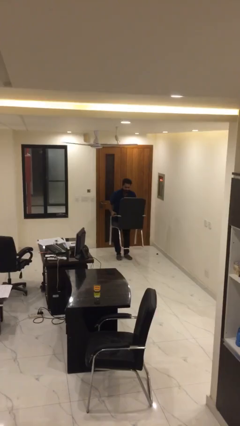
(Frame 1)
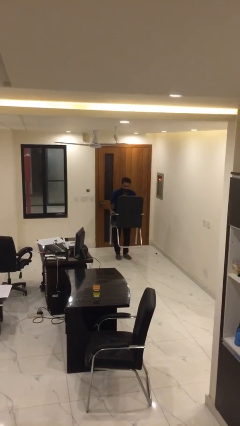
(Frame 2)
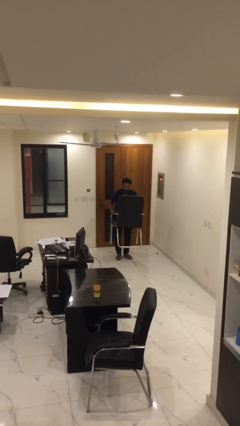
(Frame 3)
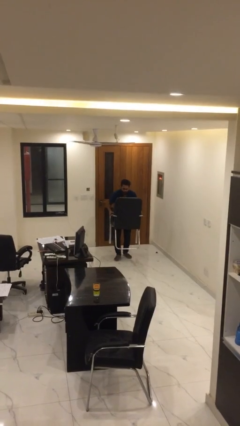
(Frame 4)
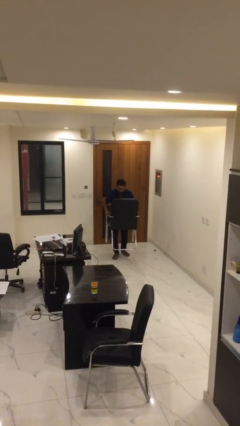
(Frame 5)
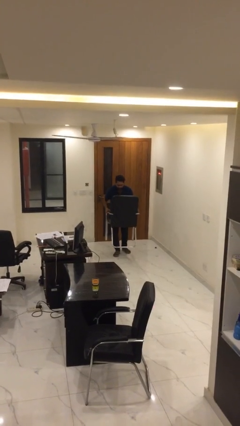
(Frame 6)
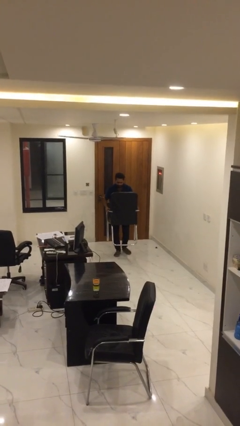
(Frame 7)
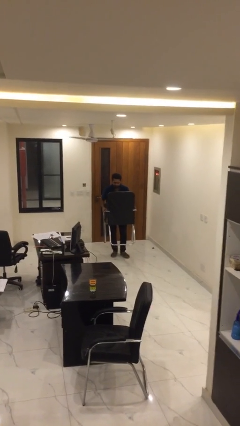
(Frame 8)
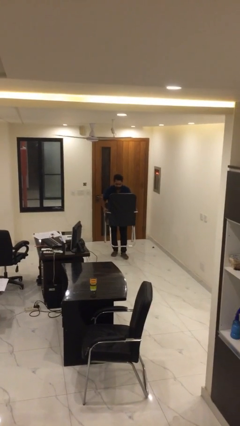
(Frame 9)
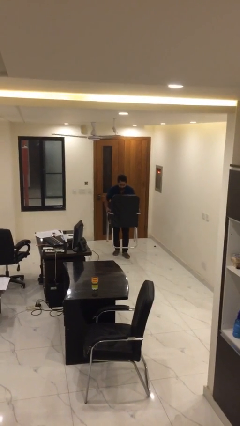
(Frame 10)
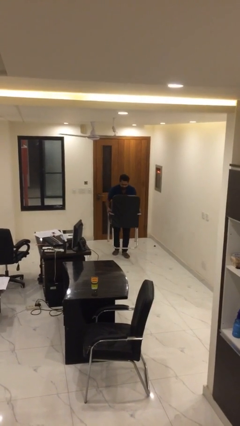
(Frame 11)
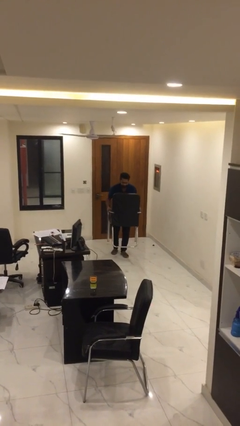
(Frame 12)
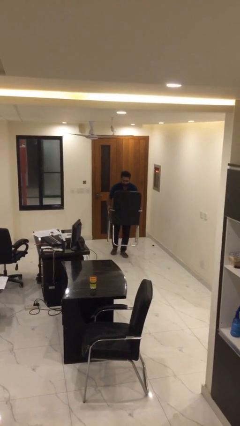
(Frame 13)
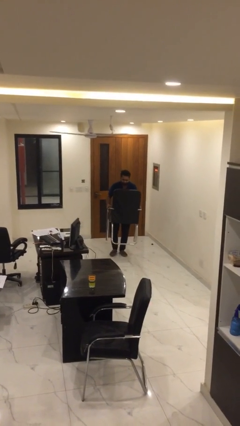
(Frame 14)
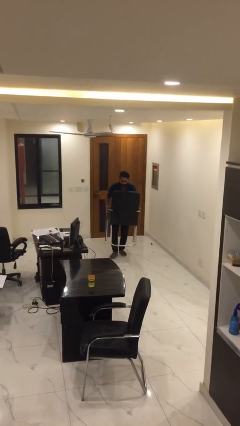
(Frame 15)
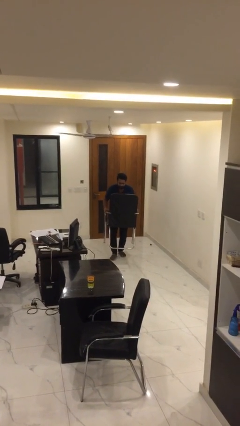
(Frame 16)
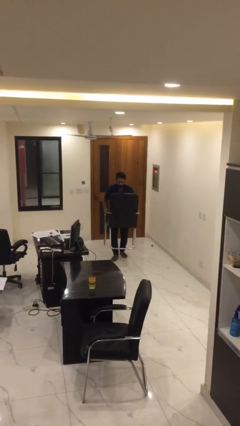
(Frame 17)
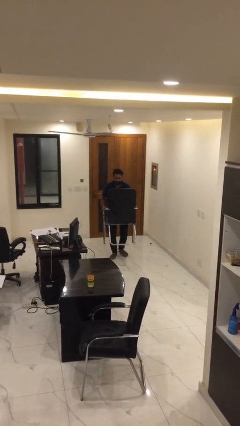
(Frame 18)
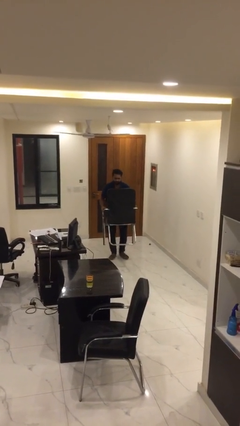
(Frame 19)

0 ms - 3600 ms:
person carries heavy object

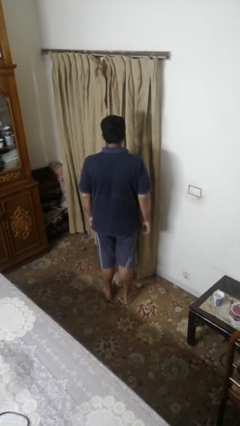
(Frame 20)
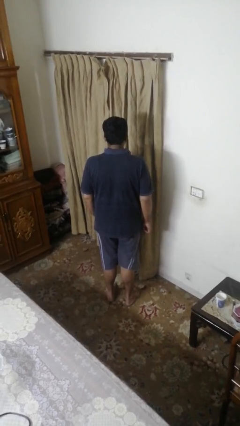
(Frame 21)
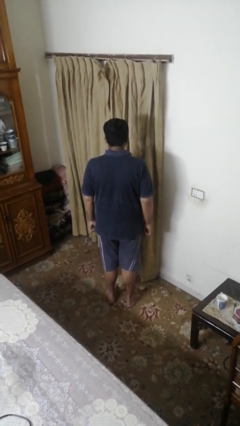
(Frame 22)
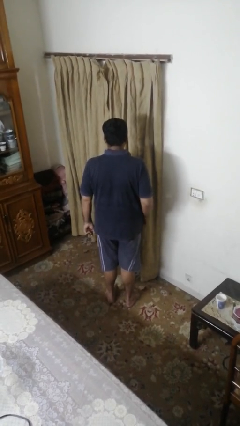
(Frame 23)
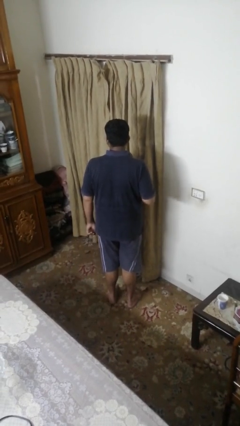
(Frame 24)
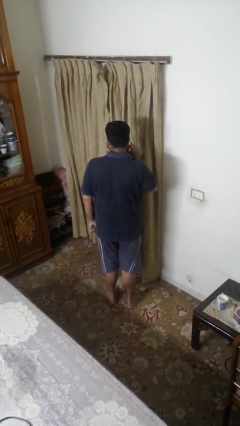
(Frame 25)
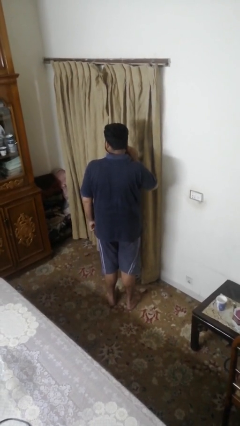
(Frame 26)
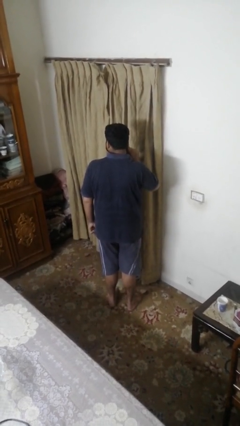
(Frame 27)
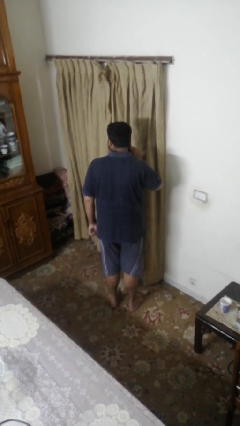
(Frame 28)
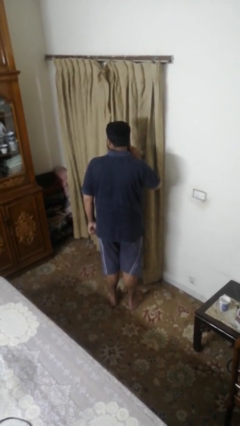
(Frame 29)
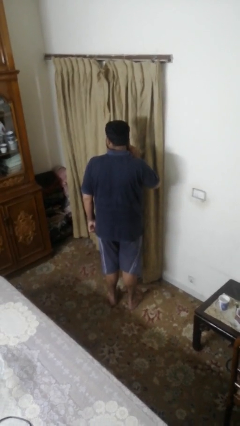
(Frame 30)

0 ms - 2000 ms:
person gestures listen closely

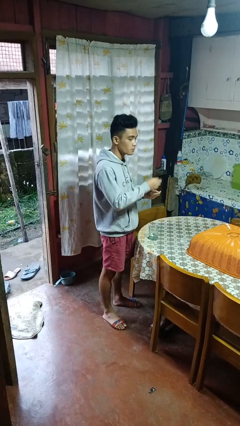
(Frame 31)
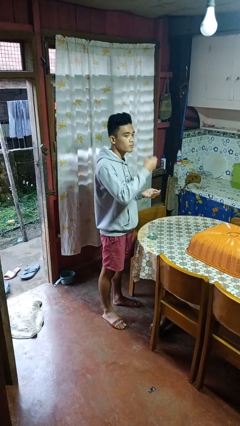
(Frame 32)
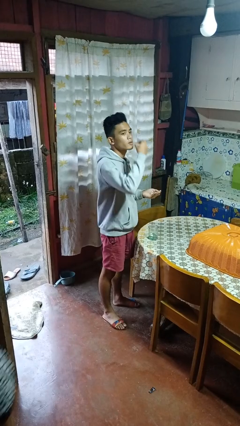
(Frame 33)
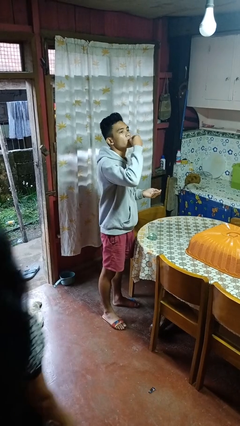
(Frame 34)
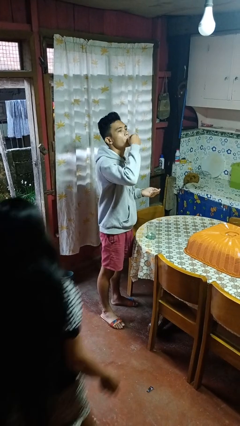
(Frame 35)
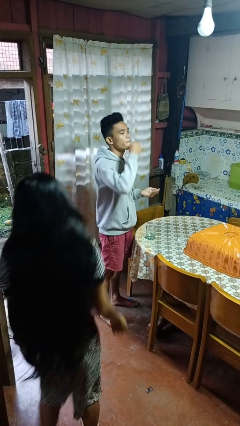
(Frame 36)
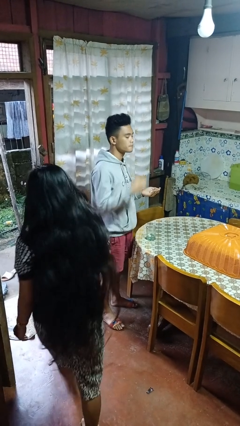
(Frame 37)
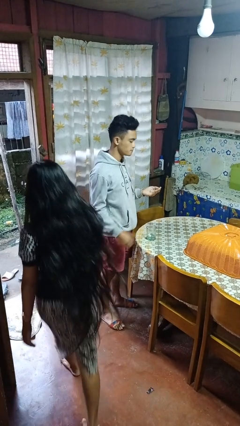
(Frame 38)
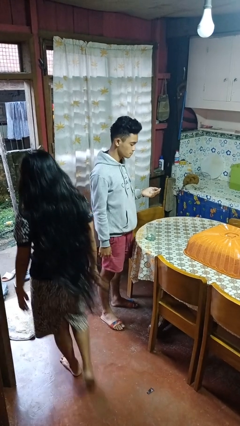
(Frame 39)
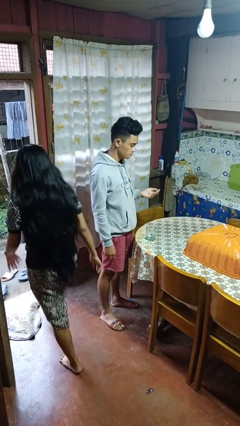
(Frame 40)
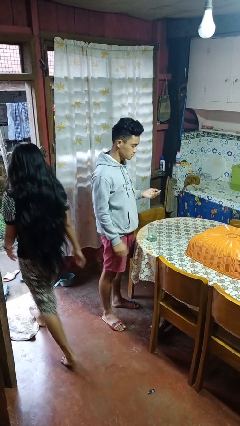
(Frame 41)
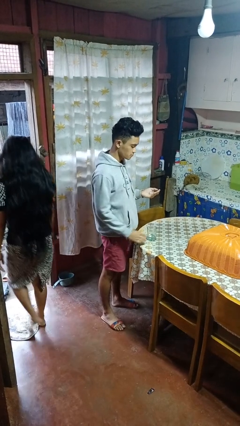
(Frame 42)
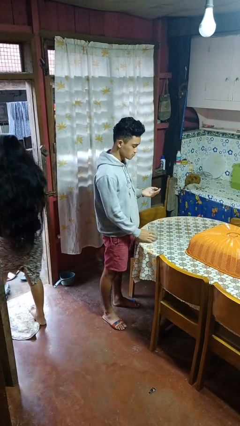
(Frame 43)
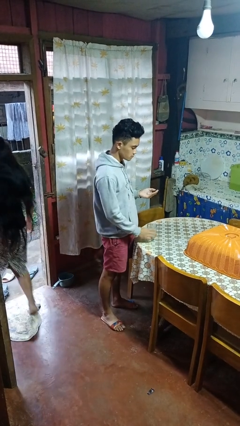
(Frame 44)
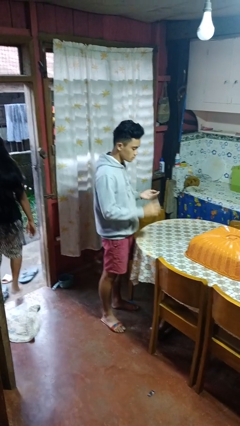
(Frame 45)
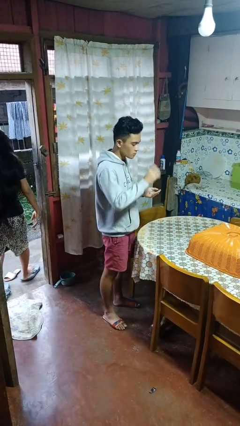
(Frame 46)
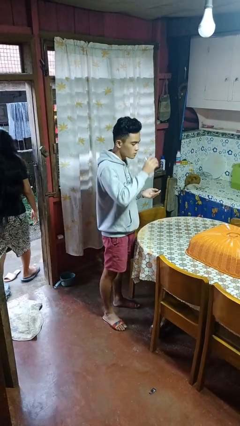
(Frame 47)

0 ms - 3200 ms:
person takes medicine pills

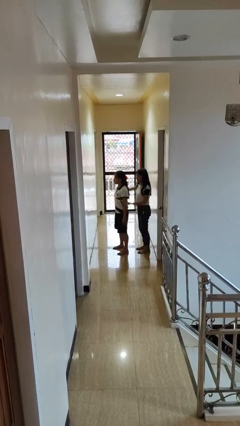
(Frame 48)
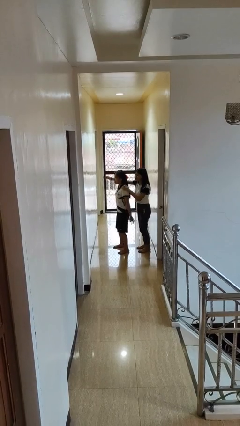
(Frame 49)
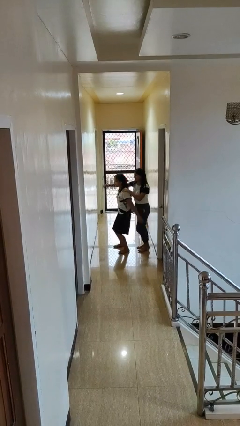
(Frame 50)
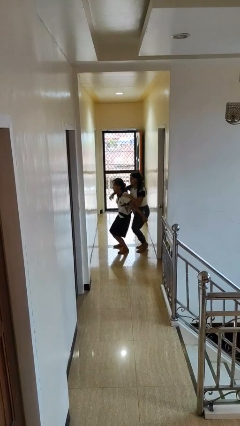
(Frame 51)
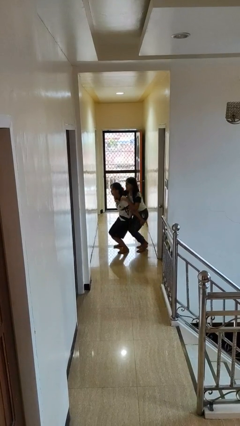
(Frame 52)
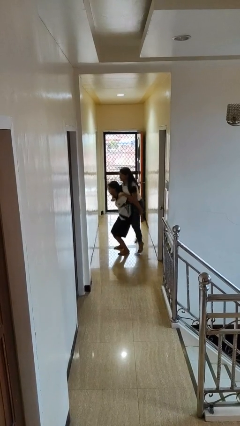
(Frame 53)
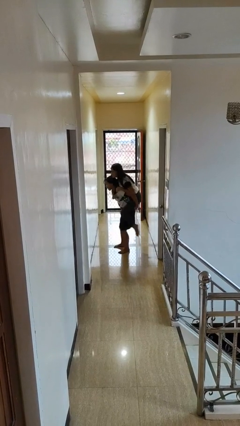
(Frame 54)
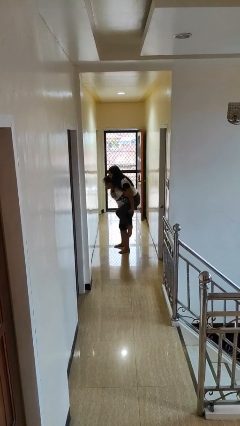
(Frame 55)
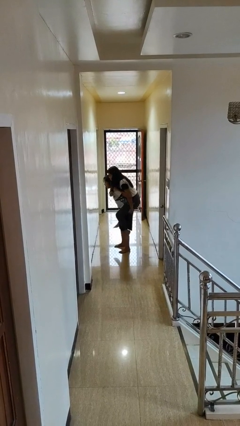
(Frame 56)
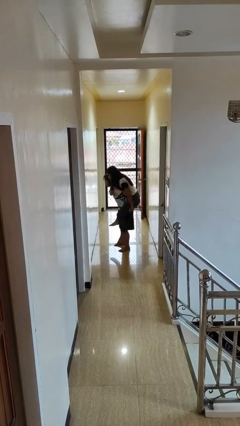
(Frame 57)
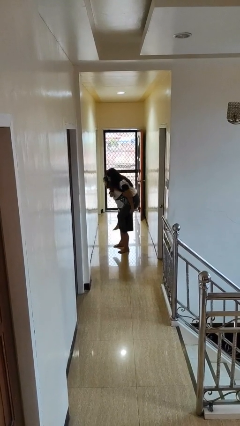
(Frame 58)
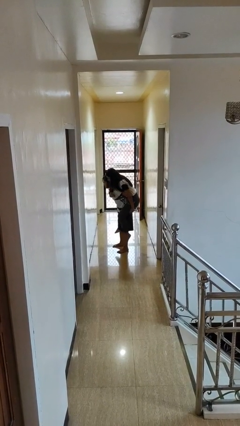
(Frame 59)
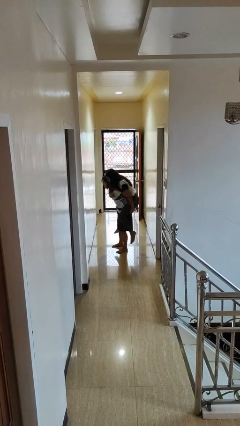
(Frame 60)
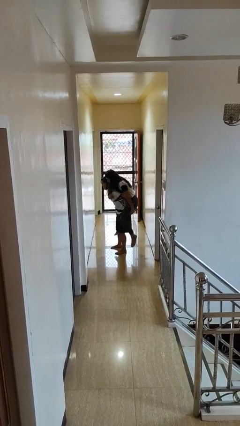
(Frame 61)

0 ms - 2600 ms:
person carries person over shoulder

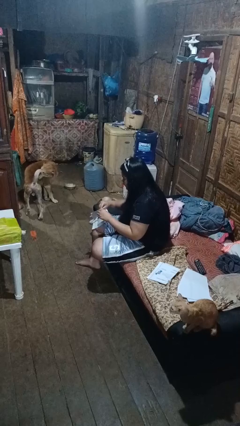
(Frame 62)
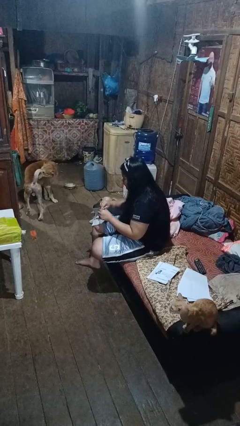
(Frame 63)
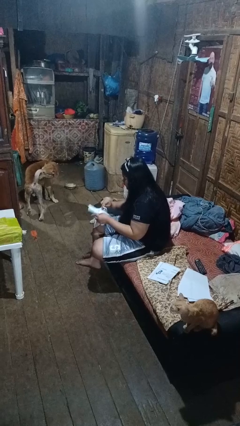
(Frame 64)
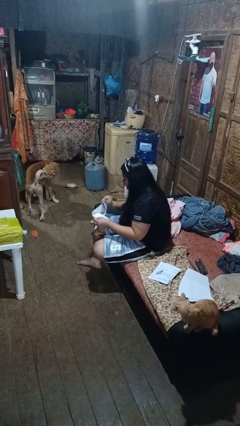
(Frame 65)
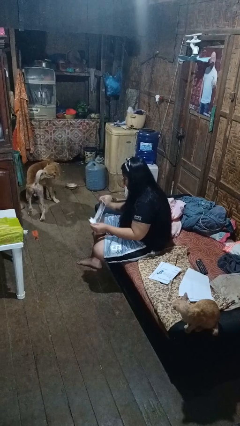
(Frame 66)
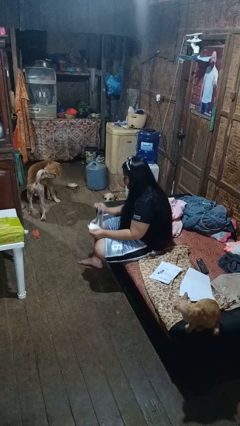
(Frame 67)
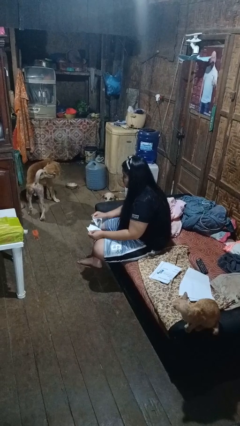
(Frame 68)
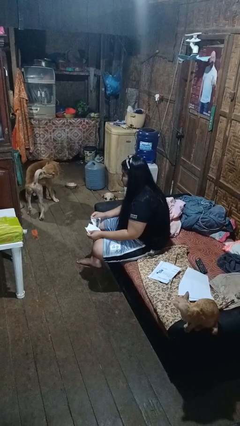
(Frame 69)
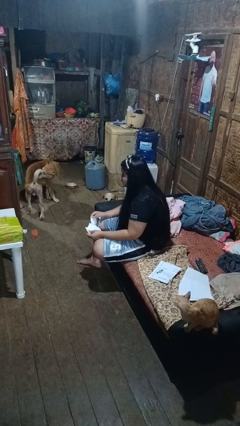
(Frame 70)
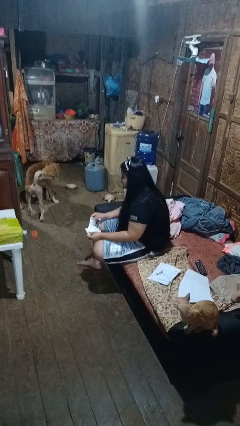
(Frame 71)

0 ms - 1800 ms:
person tears paper

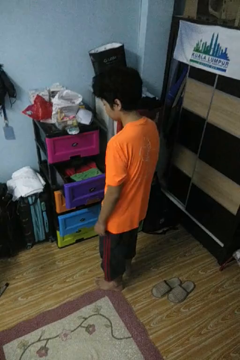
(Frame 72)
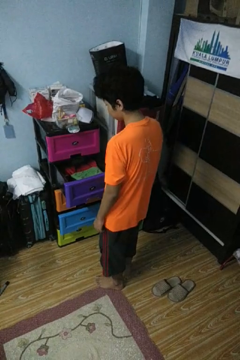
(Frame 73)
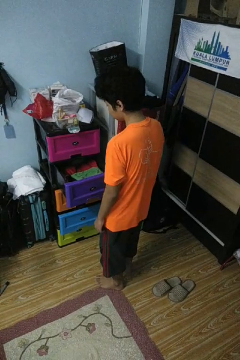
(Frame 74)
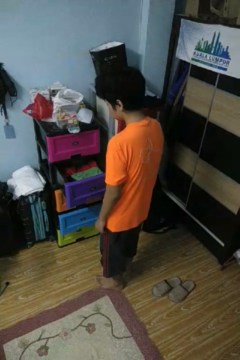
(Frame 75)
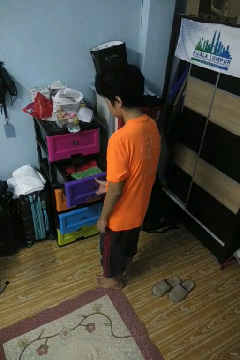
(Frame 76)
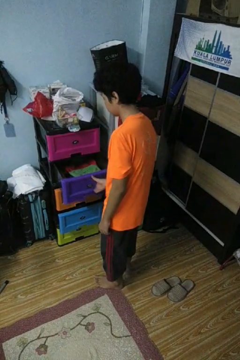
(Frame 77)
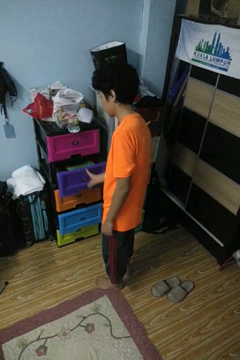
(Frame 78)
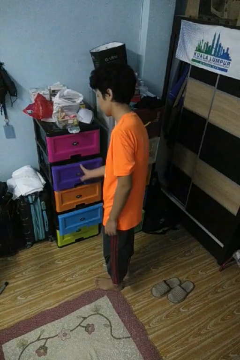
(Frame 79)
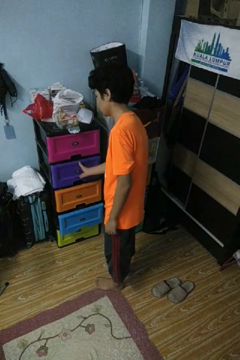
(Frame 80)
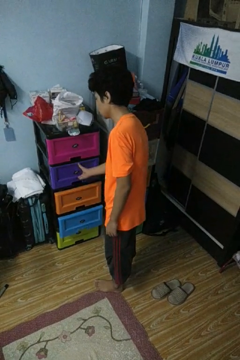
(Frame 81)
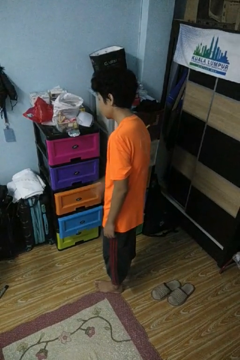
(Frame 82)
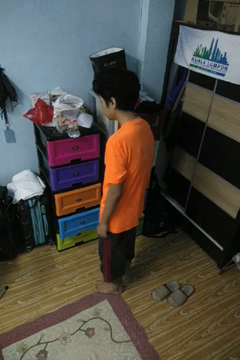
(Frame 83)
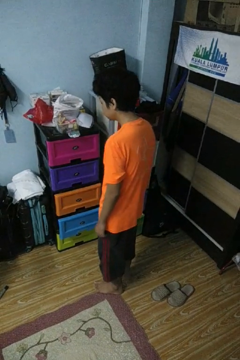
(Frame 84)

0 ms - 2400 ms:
person closes dresser drawer

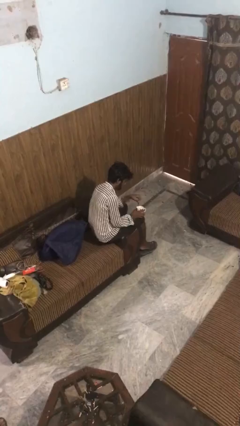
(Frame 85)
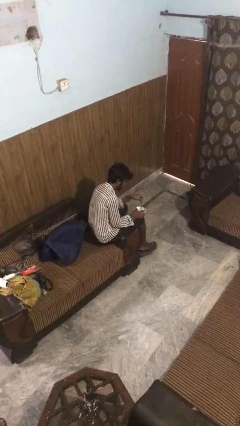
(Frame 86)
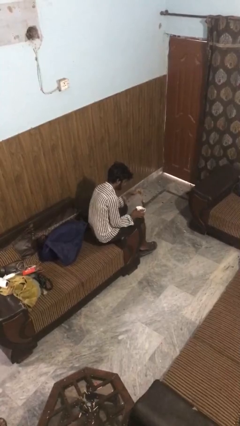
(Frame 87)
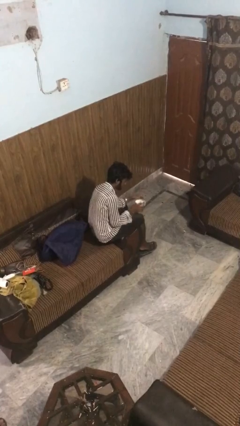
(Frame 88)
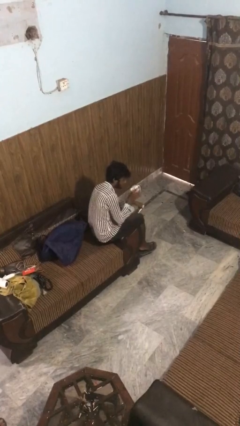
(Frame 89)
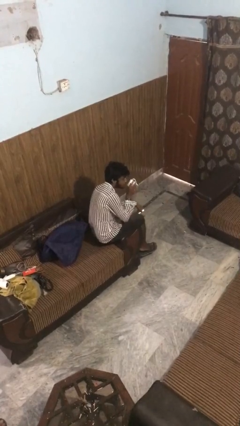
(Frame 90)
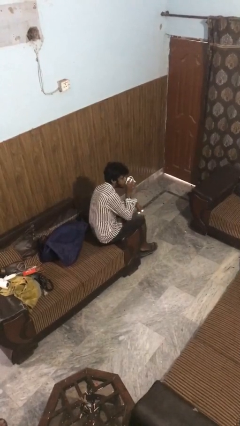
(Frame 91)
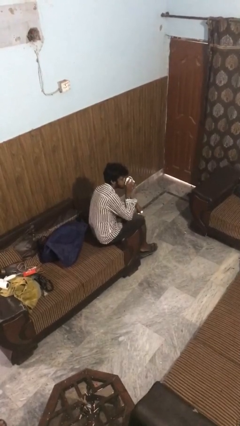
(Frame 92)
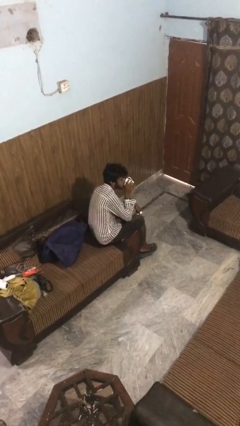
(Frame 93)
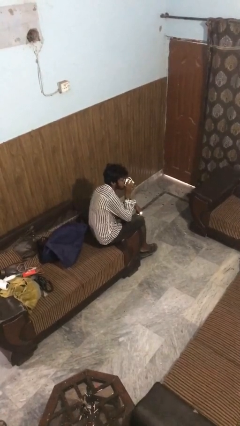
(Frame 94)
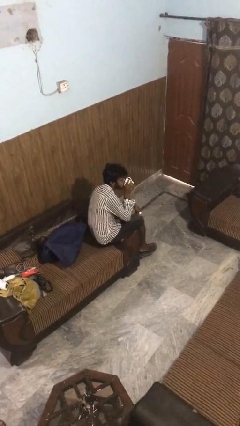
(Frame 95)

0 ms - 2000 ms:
person drinks from mug

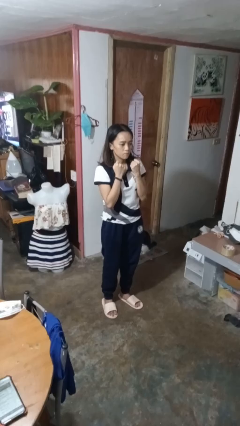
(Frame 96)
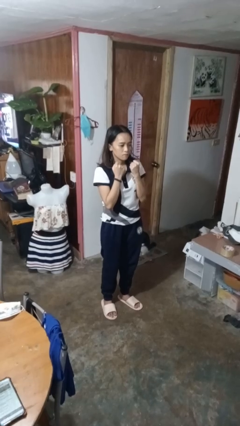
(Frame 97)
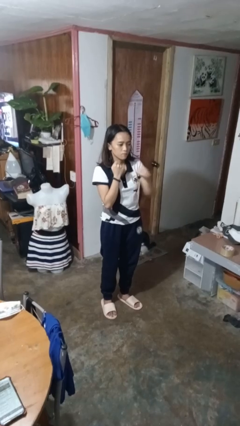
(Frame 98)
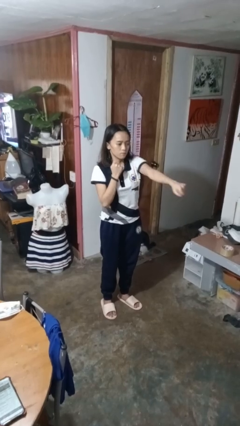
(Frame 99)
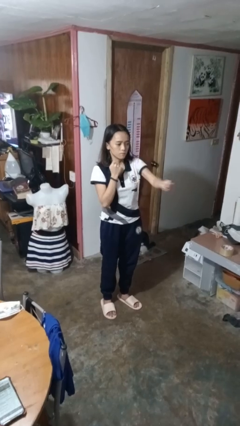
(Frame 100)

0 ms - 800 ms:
person punches
